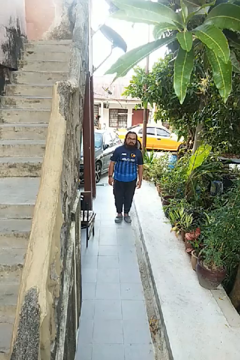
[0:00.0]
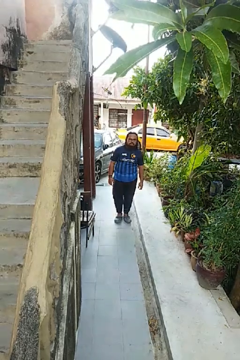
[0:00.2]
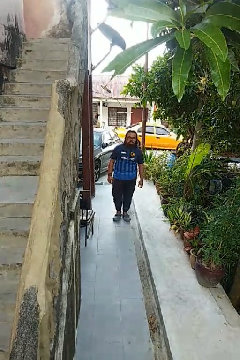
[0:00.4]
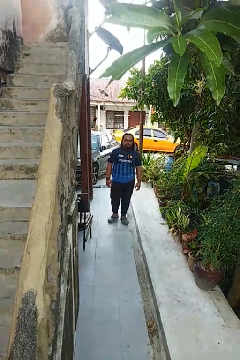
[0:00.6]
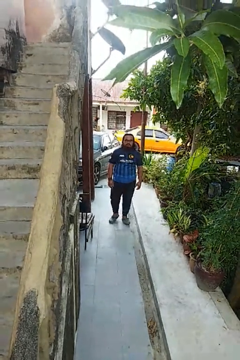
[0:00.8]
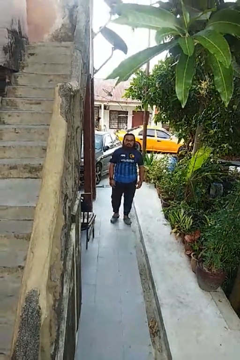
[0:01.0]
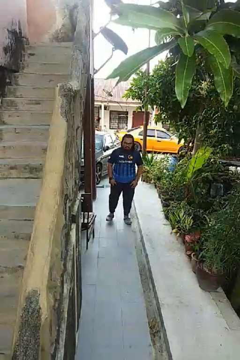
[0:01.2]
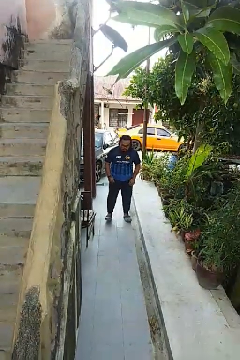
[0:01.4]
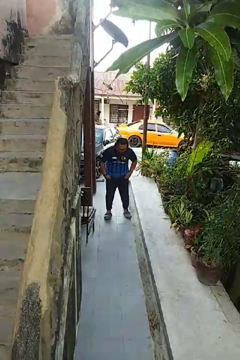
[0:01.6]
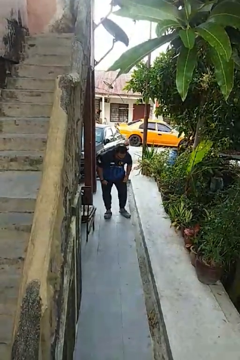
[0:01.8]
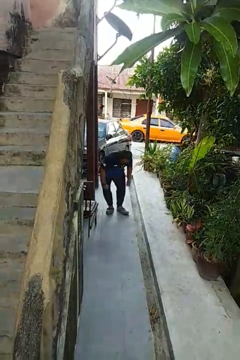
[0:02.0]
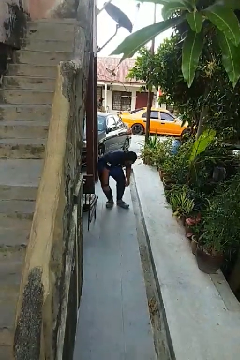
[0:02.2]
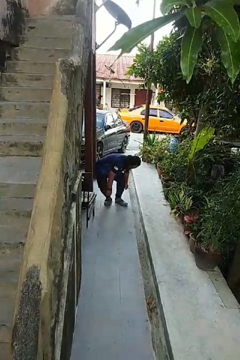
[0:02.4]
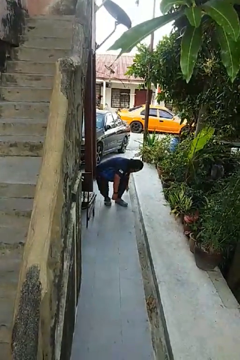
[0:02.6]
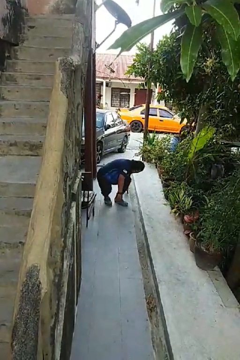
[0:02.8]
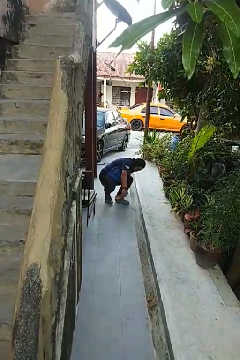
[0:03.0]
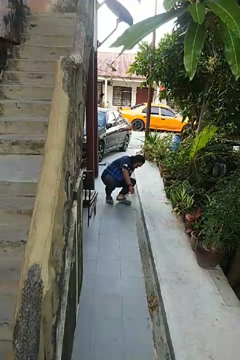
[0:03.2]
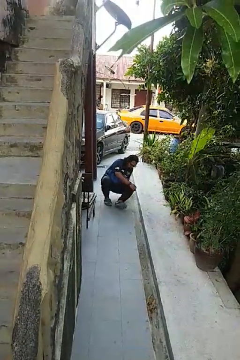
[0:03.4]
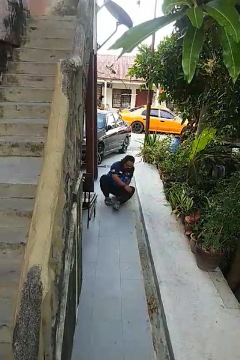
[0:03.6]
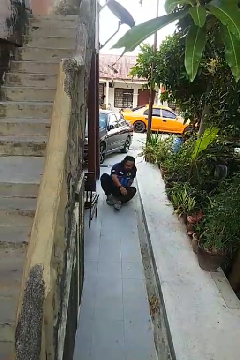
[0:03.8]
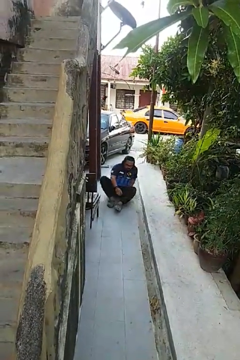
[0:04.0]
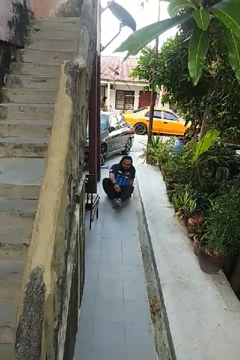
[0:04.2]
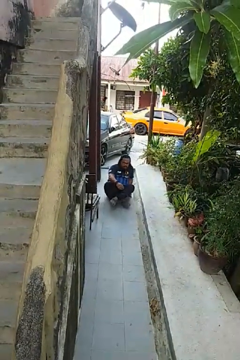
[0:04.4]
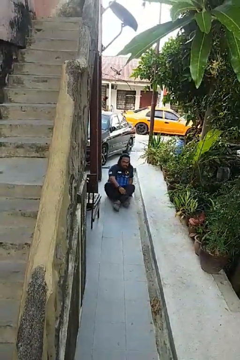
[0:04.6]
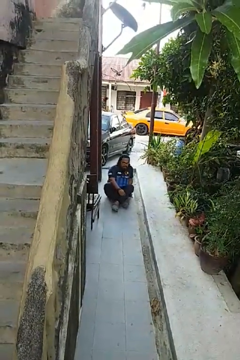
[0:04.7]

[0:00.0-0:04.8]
person sits crisscross

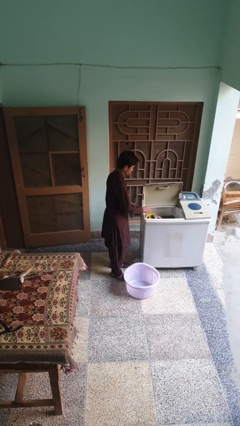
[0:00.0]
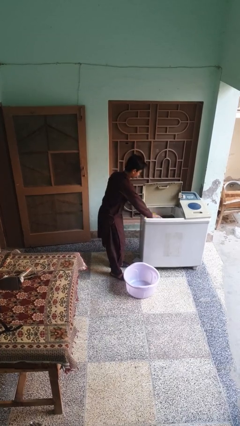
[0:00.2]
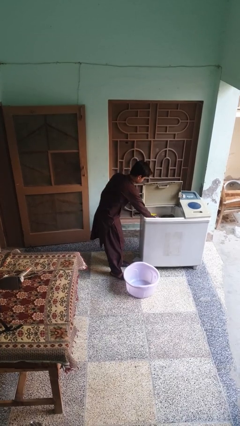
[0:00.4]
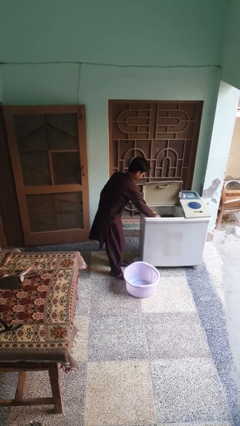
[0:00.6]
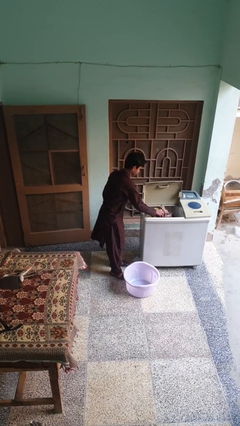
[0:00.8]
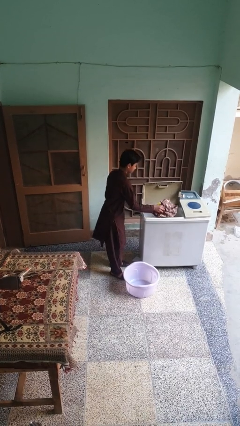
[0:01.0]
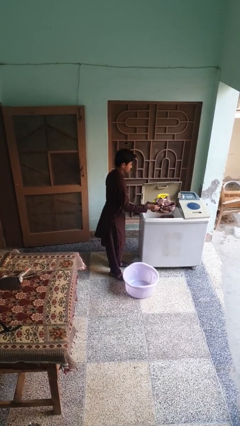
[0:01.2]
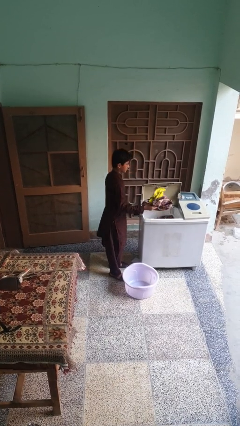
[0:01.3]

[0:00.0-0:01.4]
person loads clotheswasher

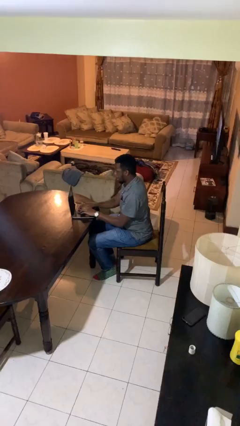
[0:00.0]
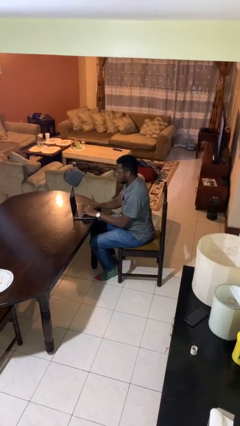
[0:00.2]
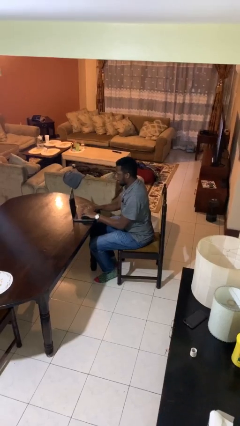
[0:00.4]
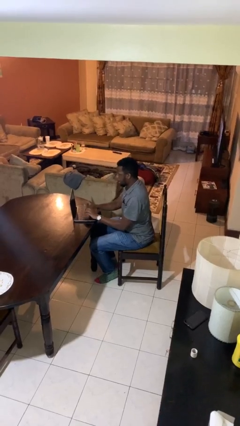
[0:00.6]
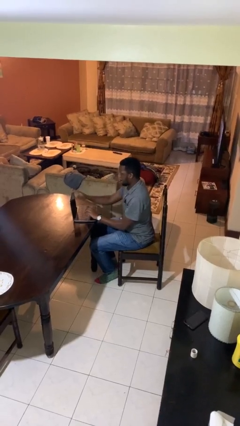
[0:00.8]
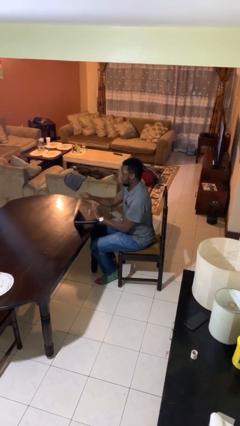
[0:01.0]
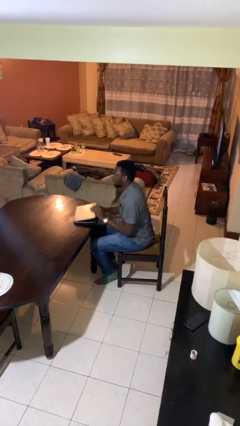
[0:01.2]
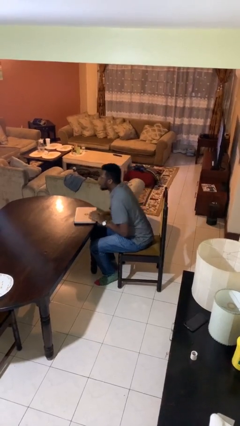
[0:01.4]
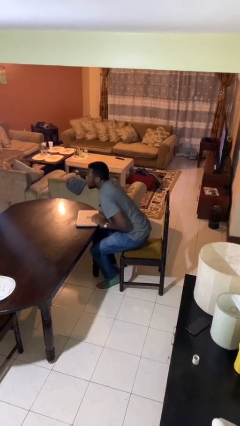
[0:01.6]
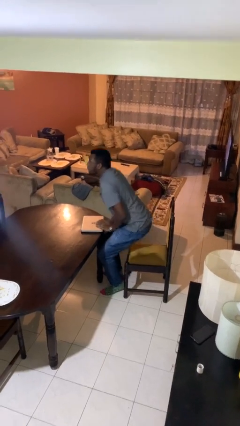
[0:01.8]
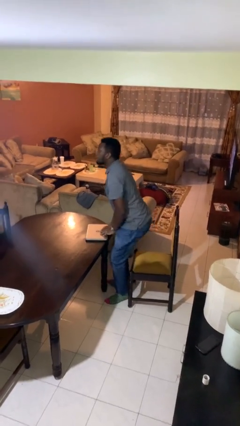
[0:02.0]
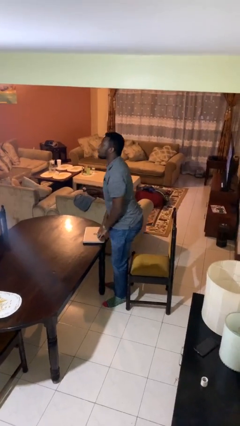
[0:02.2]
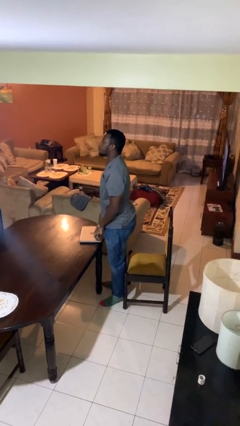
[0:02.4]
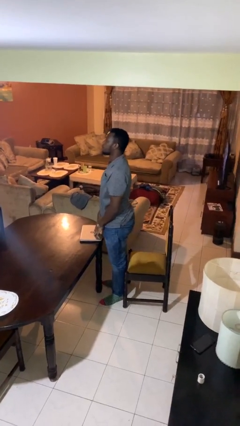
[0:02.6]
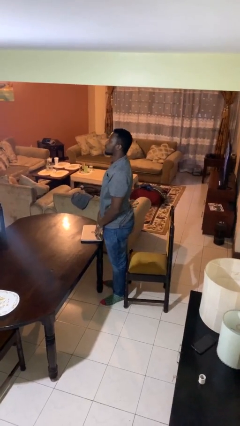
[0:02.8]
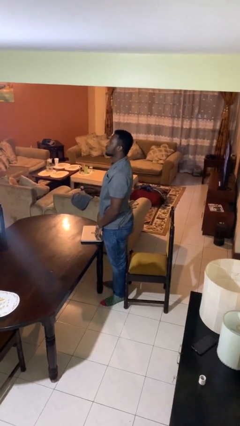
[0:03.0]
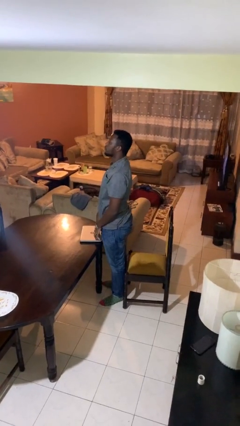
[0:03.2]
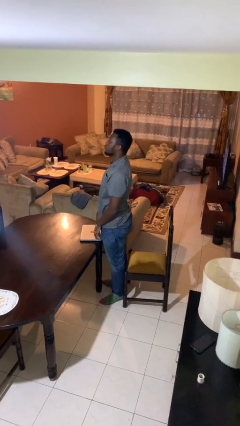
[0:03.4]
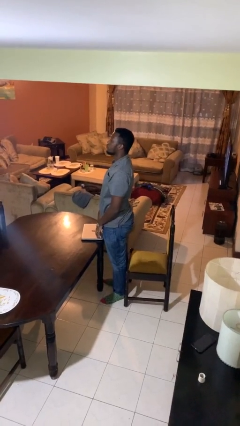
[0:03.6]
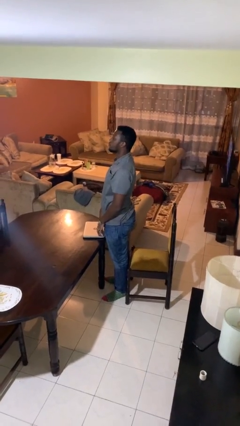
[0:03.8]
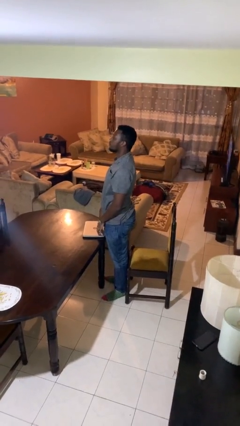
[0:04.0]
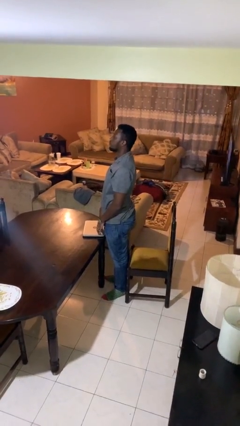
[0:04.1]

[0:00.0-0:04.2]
person stands up

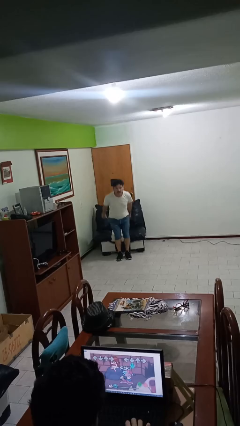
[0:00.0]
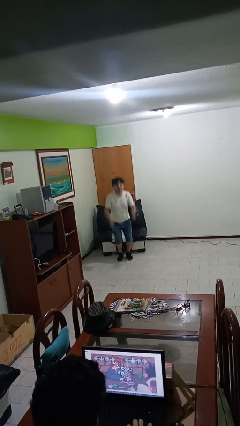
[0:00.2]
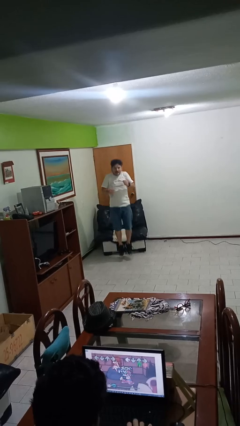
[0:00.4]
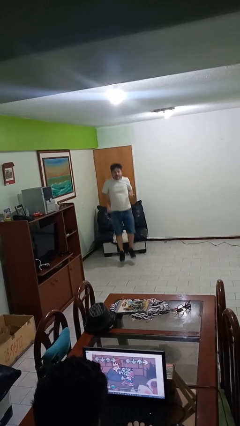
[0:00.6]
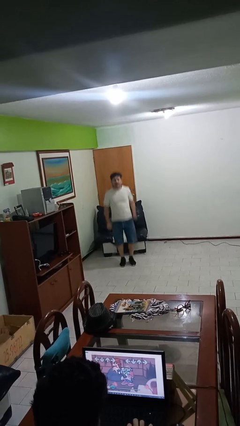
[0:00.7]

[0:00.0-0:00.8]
person jumps

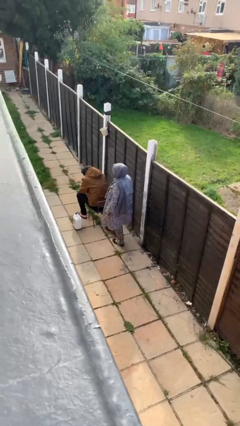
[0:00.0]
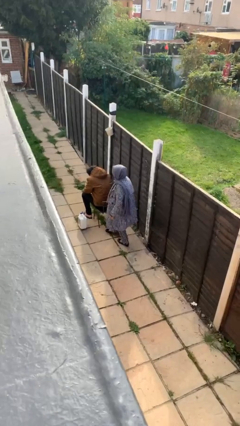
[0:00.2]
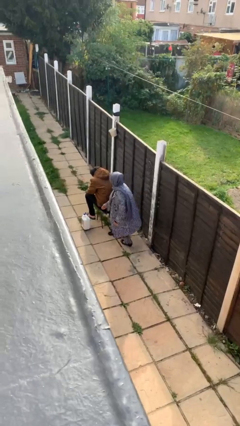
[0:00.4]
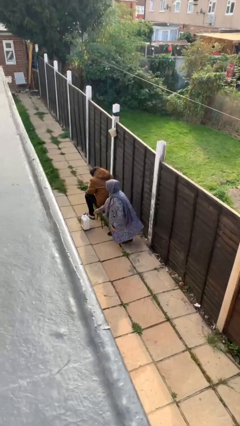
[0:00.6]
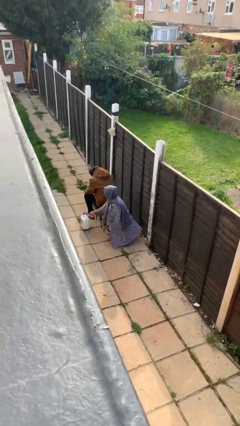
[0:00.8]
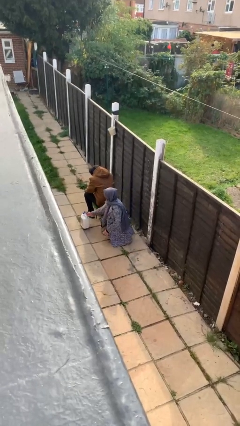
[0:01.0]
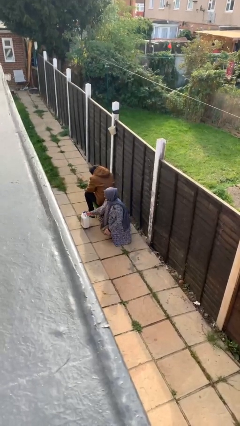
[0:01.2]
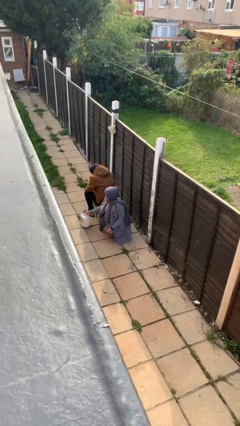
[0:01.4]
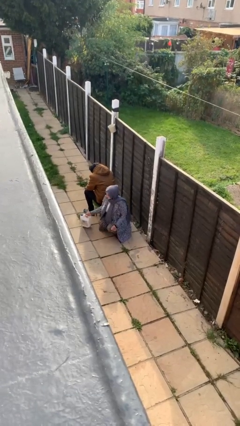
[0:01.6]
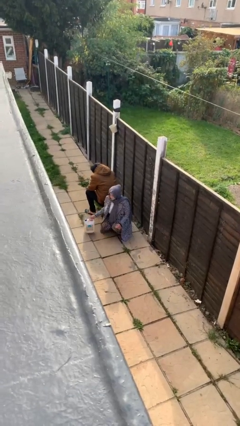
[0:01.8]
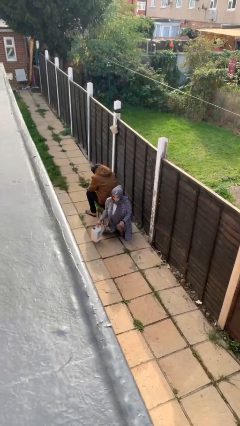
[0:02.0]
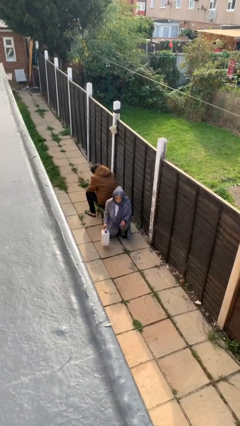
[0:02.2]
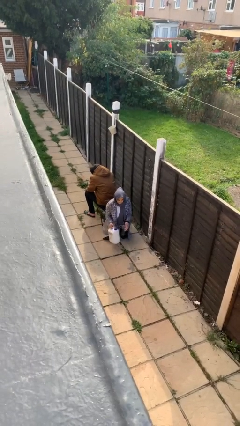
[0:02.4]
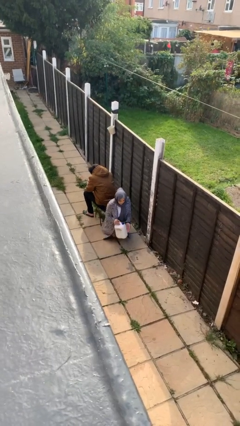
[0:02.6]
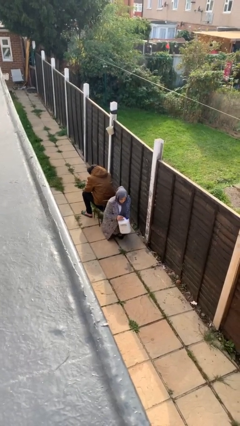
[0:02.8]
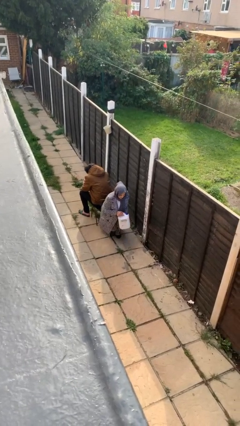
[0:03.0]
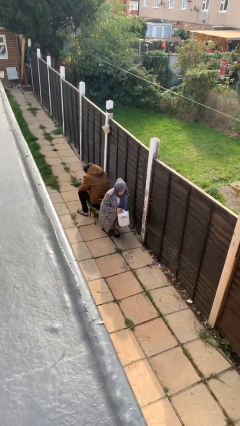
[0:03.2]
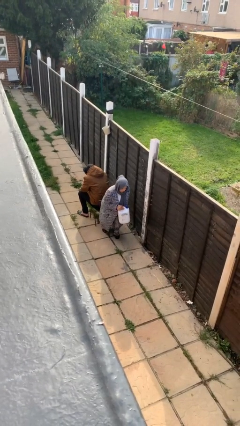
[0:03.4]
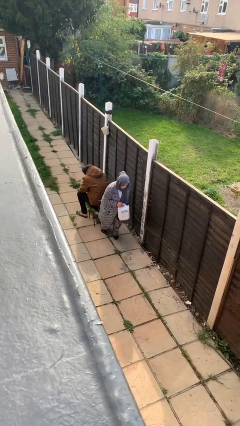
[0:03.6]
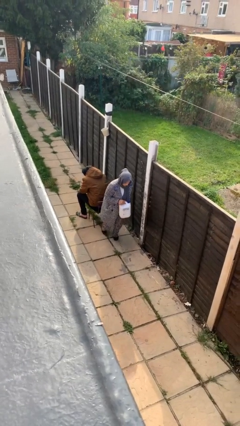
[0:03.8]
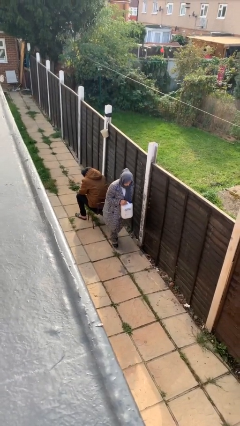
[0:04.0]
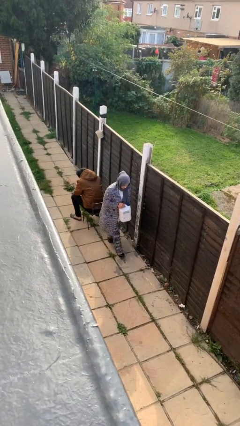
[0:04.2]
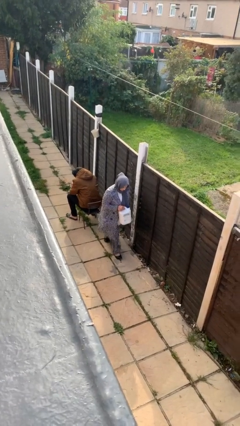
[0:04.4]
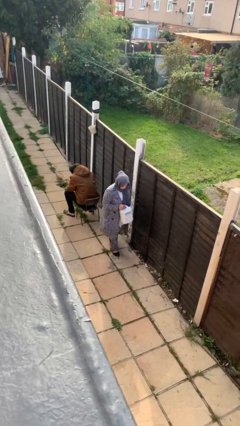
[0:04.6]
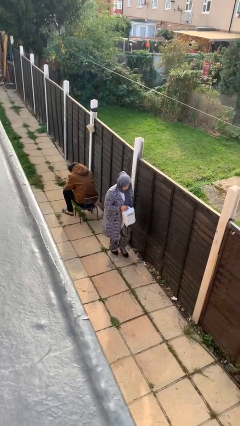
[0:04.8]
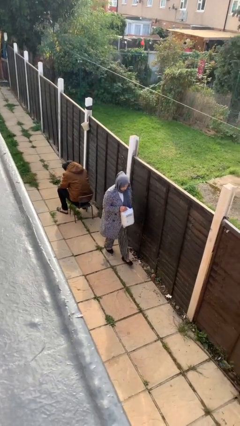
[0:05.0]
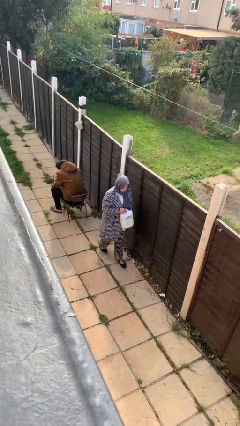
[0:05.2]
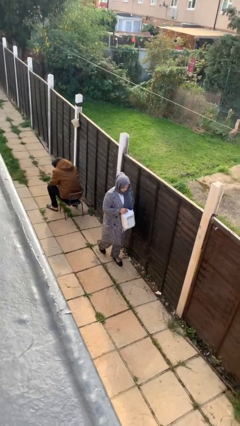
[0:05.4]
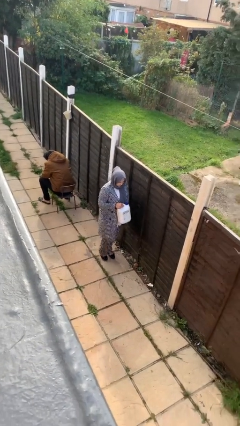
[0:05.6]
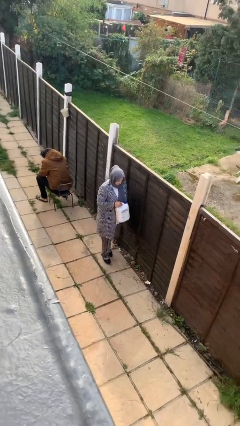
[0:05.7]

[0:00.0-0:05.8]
person steals object from person

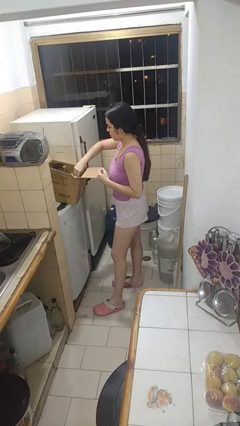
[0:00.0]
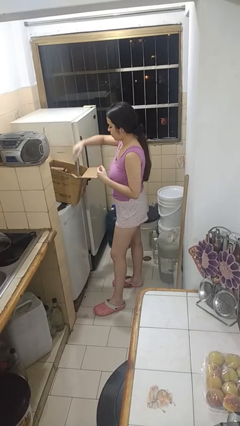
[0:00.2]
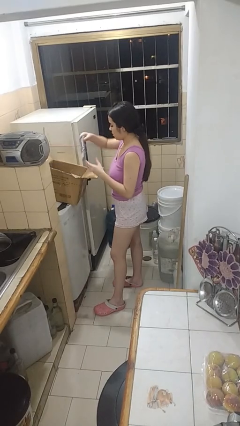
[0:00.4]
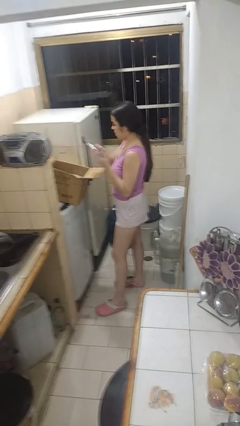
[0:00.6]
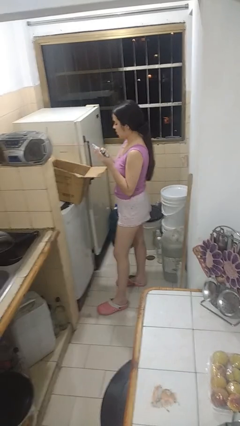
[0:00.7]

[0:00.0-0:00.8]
person takes object from box

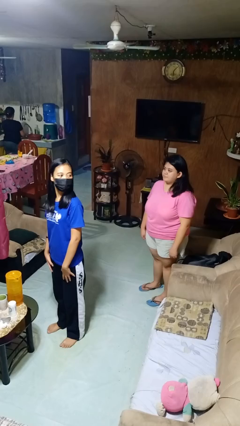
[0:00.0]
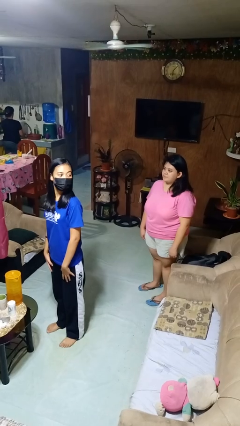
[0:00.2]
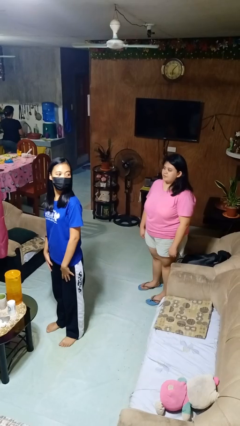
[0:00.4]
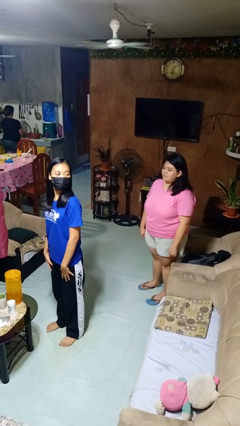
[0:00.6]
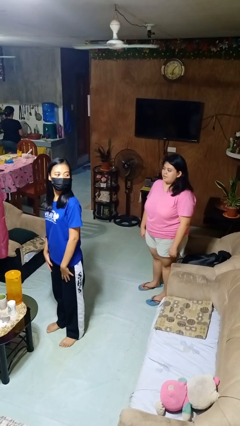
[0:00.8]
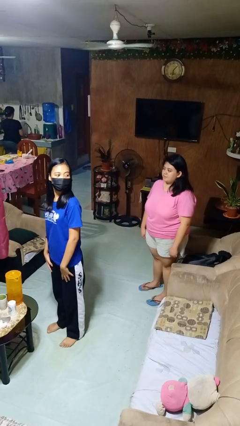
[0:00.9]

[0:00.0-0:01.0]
person looks over shoulder
